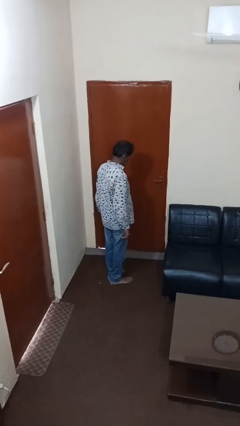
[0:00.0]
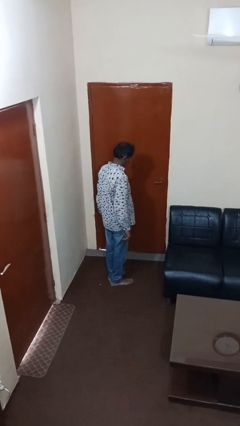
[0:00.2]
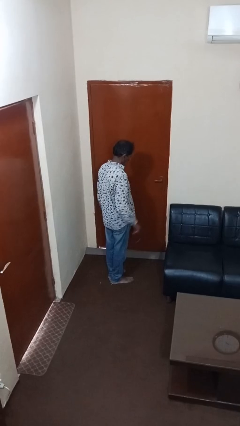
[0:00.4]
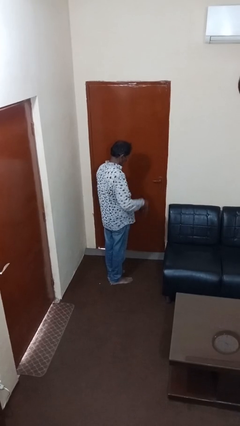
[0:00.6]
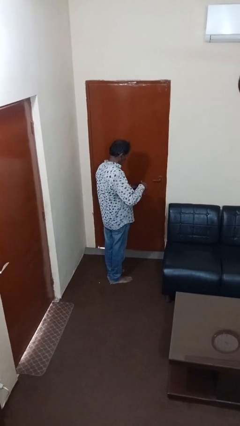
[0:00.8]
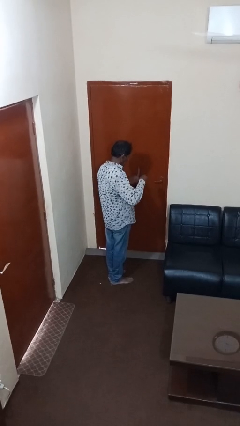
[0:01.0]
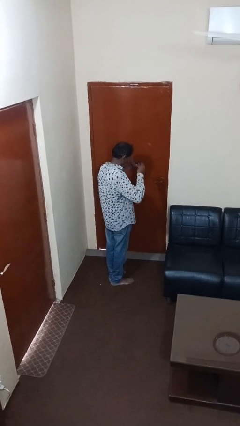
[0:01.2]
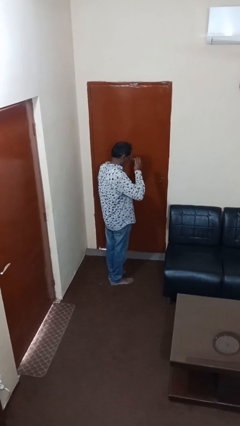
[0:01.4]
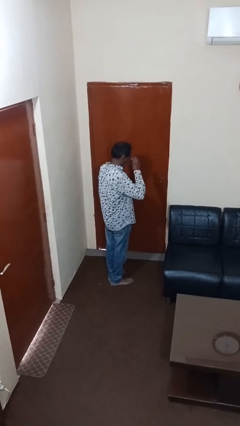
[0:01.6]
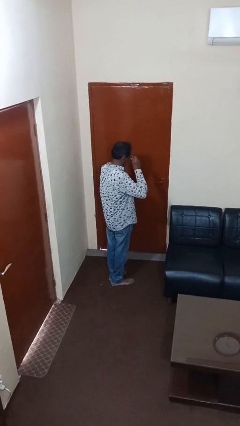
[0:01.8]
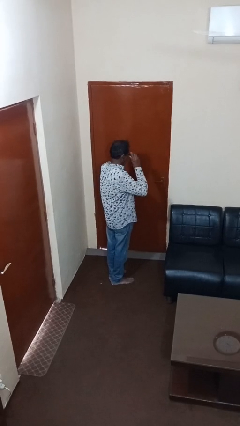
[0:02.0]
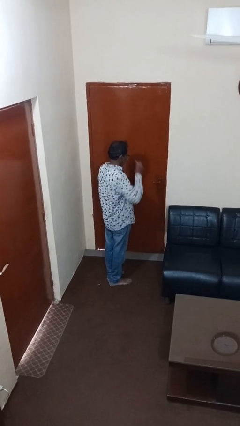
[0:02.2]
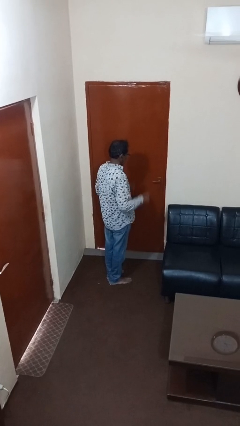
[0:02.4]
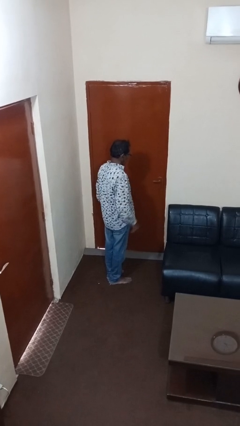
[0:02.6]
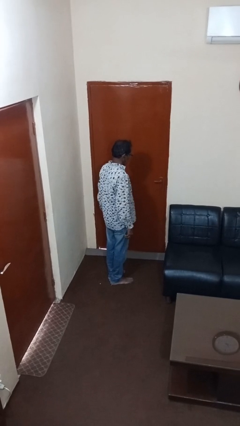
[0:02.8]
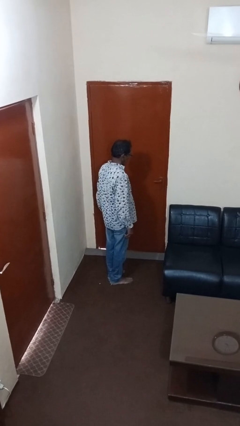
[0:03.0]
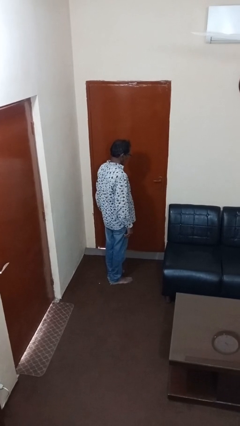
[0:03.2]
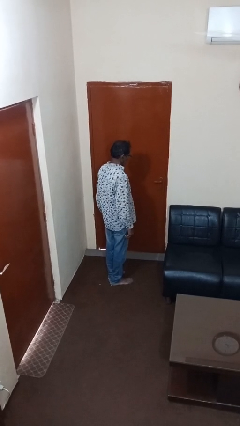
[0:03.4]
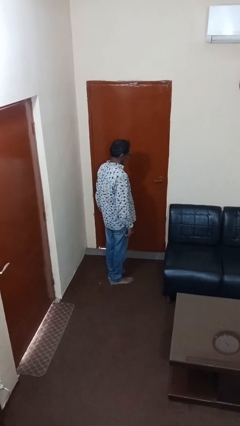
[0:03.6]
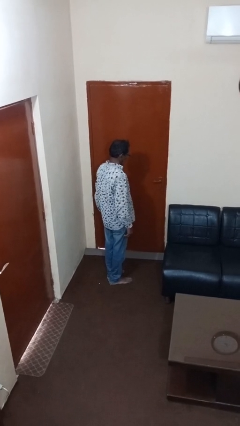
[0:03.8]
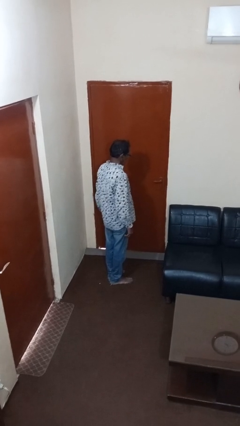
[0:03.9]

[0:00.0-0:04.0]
person puts on glasses

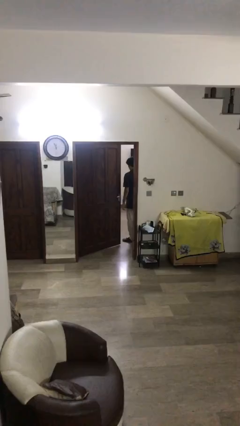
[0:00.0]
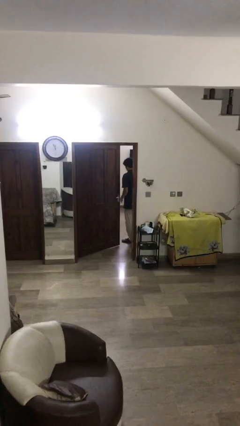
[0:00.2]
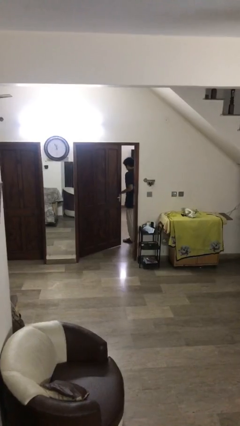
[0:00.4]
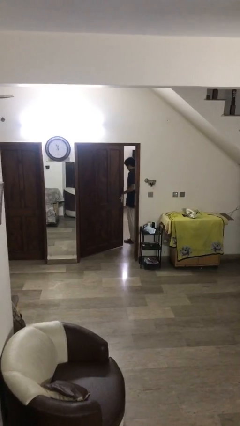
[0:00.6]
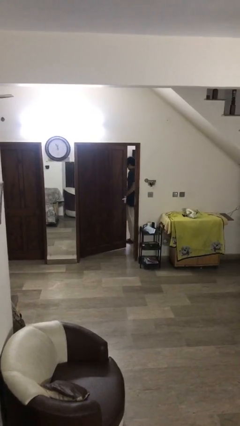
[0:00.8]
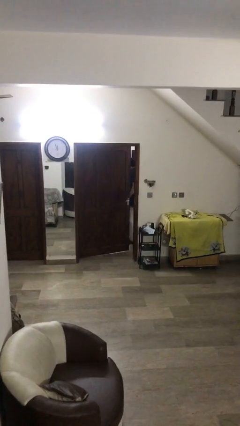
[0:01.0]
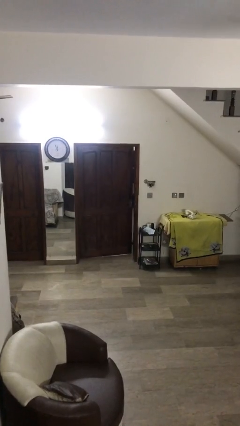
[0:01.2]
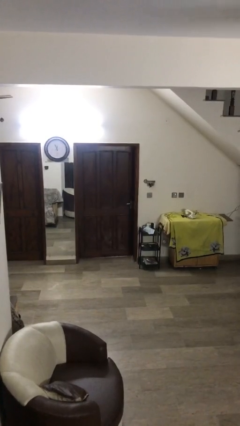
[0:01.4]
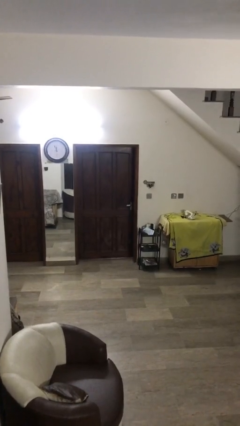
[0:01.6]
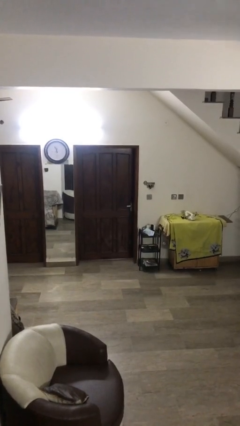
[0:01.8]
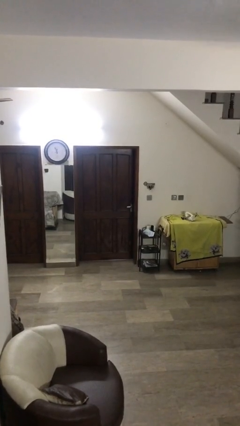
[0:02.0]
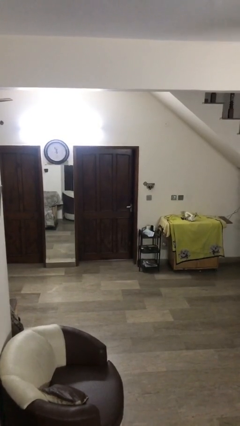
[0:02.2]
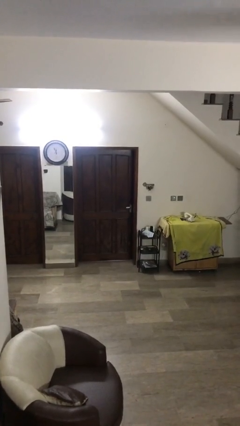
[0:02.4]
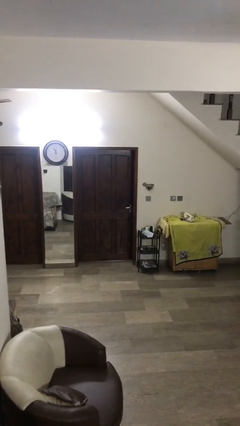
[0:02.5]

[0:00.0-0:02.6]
person closes facility door

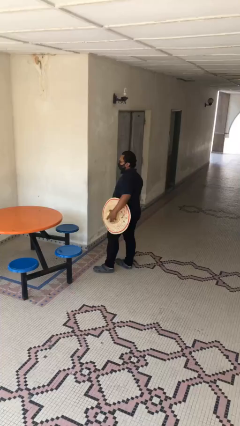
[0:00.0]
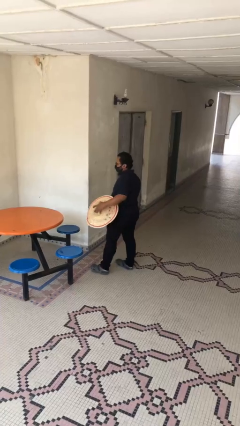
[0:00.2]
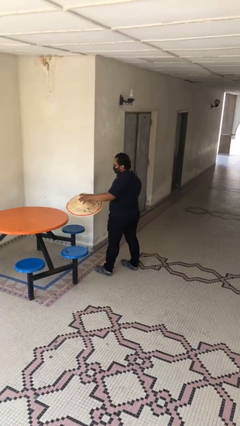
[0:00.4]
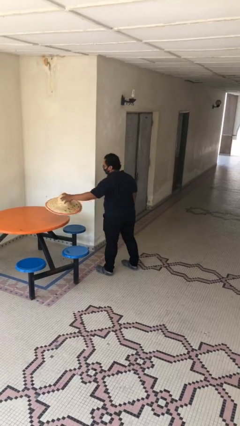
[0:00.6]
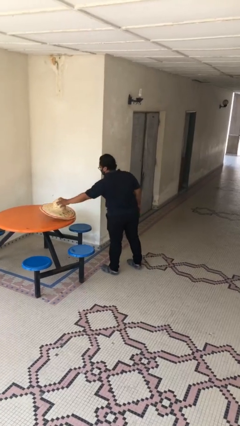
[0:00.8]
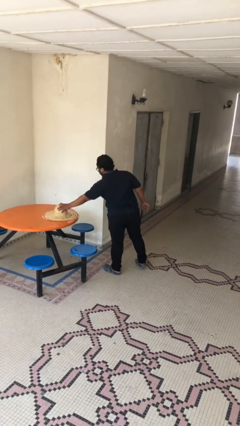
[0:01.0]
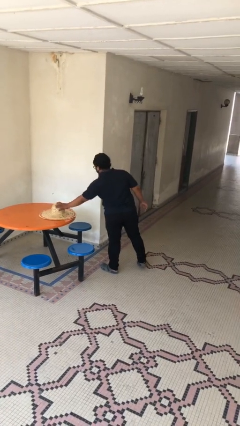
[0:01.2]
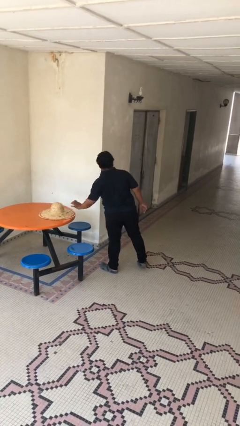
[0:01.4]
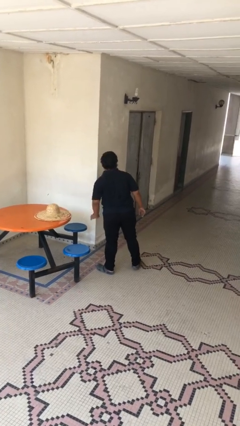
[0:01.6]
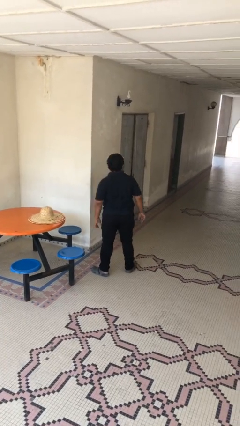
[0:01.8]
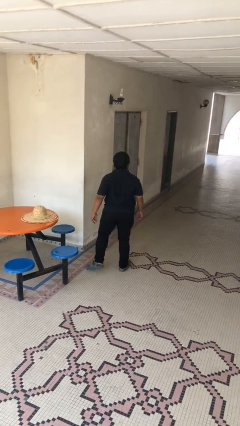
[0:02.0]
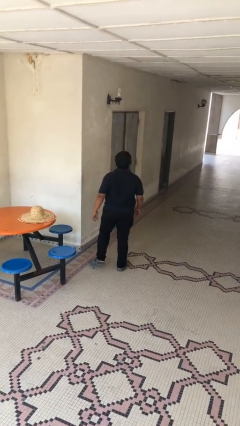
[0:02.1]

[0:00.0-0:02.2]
person puts down object on table

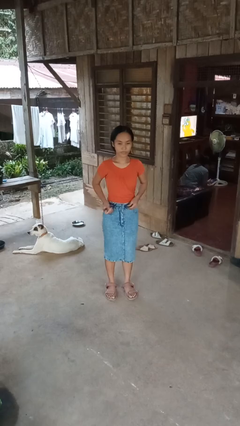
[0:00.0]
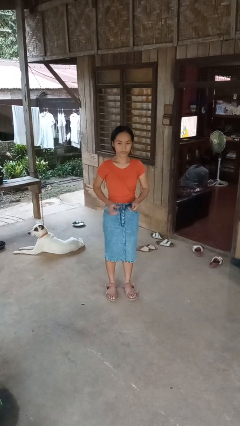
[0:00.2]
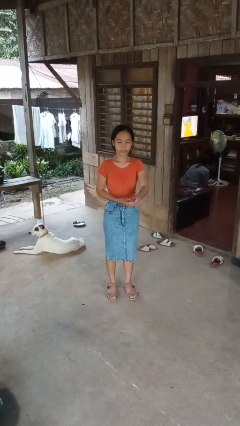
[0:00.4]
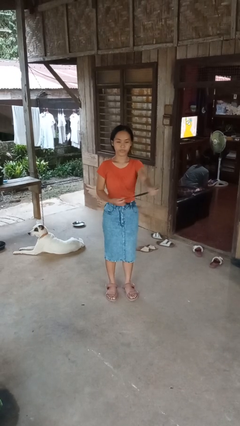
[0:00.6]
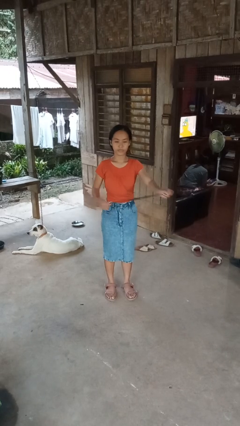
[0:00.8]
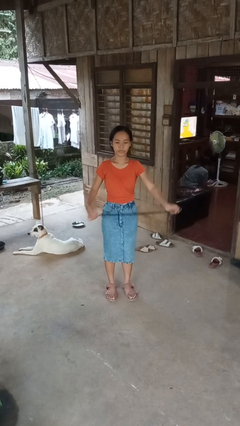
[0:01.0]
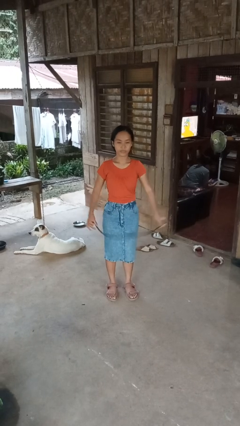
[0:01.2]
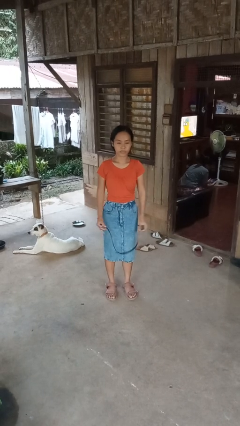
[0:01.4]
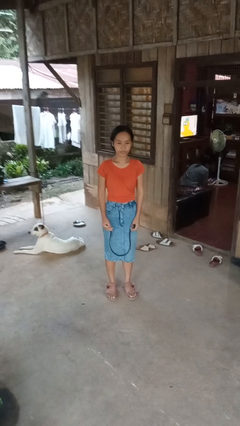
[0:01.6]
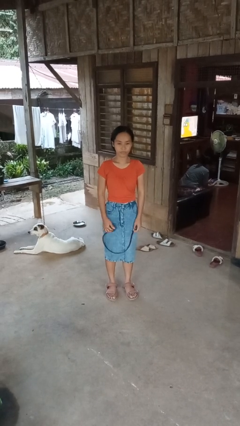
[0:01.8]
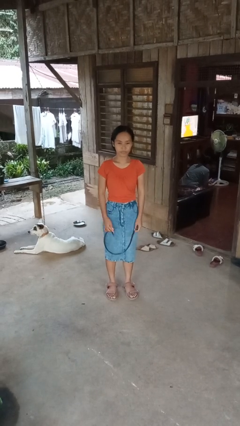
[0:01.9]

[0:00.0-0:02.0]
person takes off belt

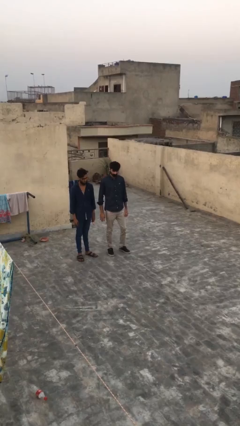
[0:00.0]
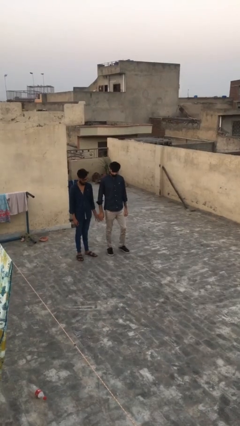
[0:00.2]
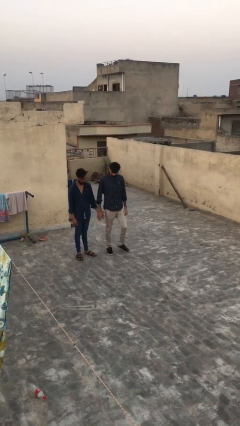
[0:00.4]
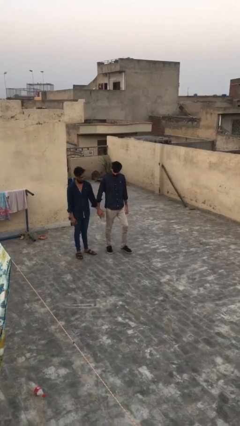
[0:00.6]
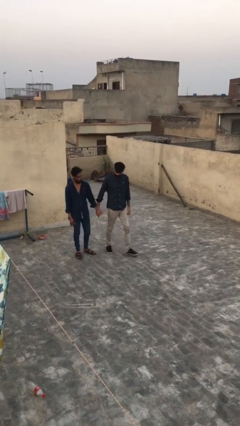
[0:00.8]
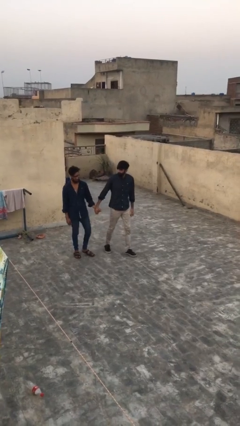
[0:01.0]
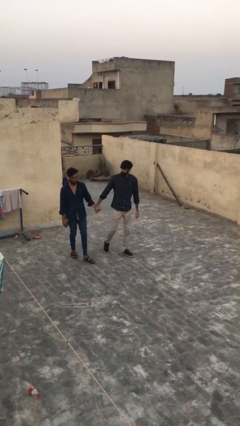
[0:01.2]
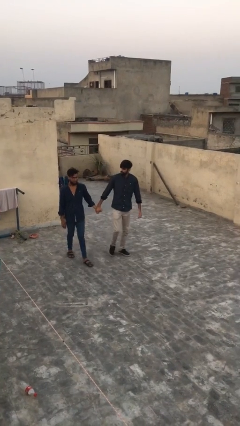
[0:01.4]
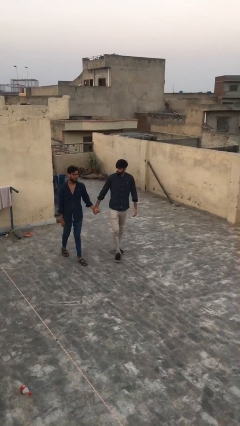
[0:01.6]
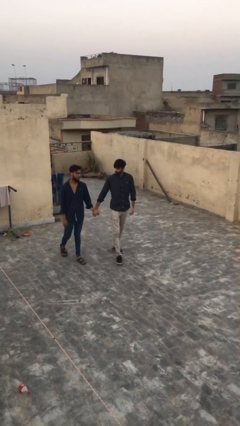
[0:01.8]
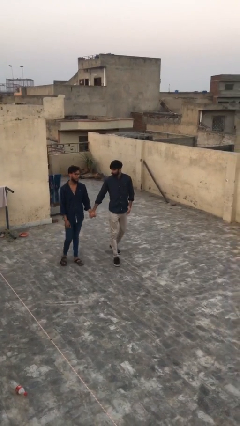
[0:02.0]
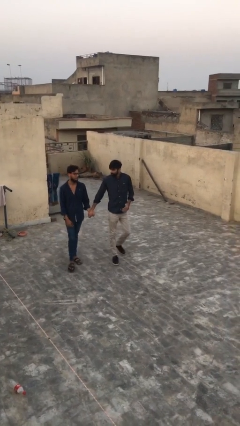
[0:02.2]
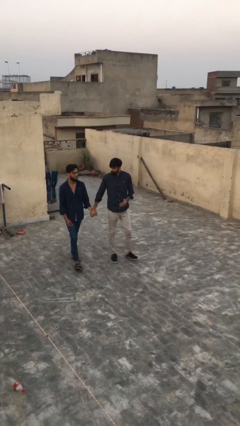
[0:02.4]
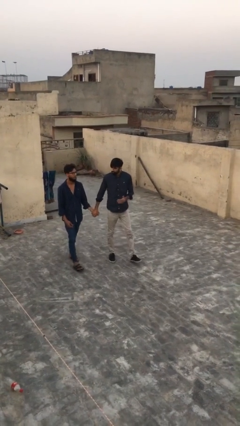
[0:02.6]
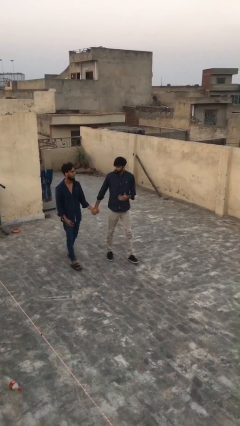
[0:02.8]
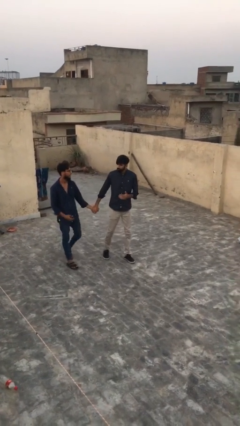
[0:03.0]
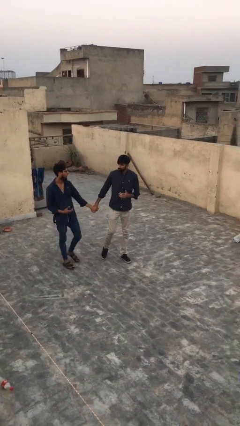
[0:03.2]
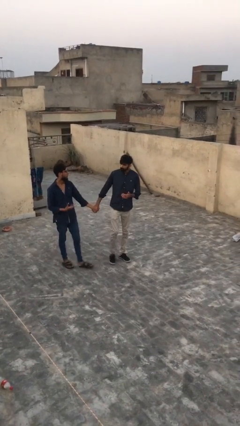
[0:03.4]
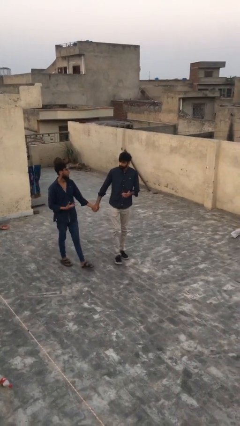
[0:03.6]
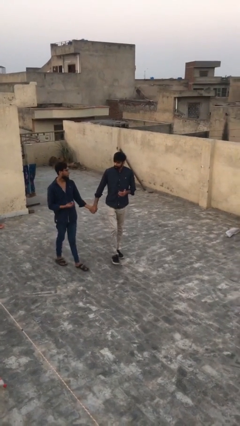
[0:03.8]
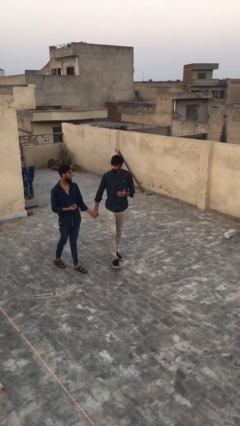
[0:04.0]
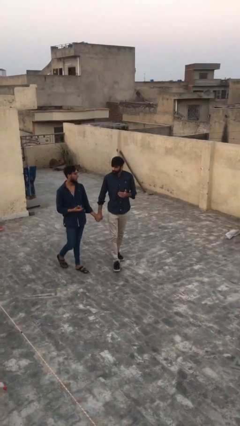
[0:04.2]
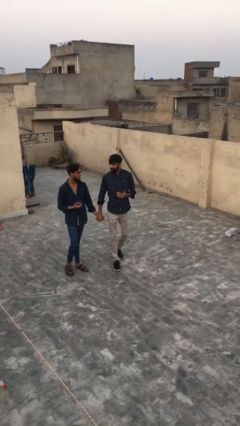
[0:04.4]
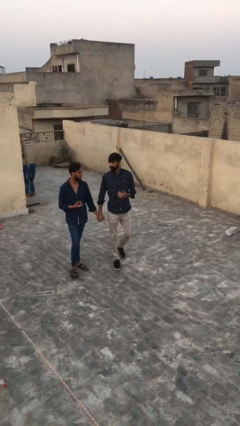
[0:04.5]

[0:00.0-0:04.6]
person holds hand

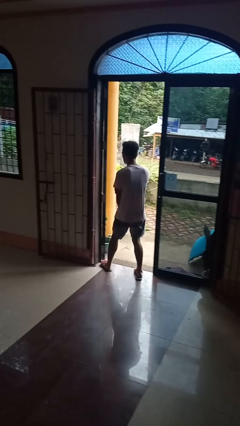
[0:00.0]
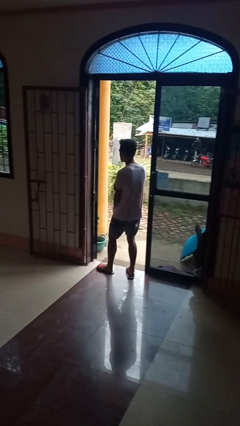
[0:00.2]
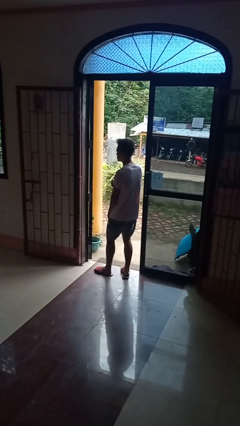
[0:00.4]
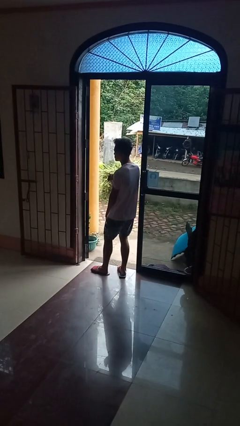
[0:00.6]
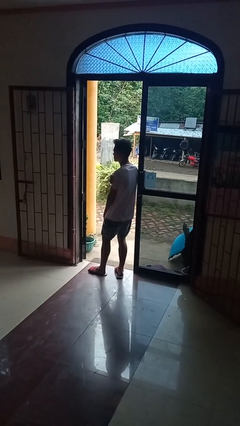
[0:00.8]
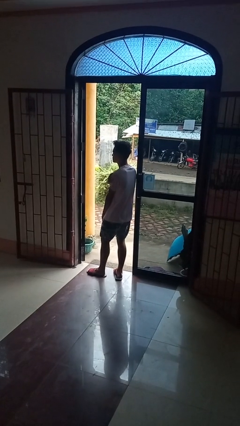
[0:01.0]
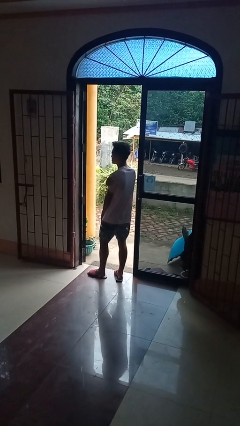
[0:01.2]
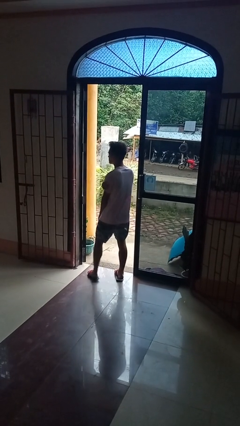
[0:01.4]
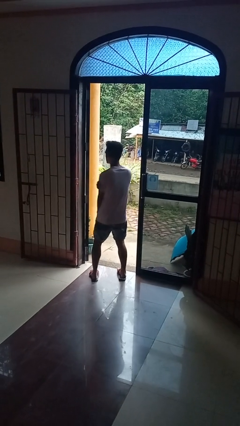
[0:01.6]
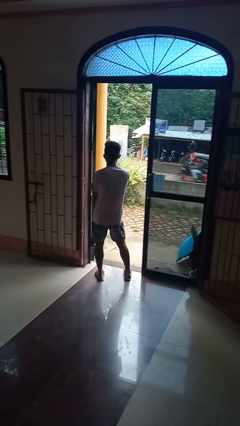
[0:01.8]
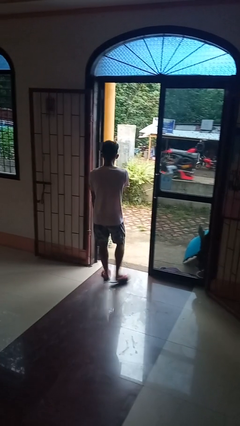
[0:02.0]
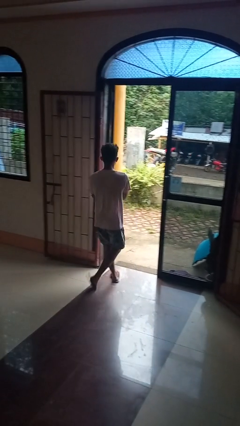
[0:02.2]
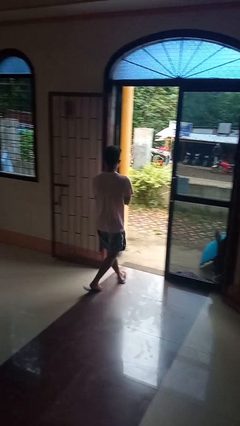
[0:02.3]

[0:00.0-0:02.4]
person bumps into wall
